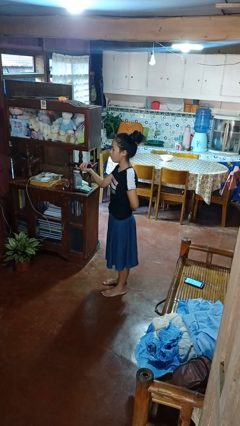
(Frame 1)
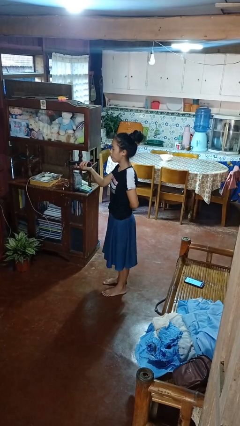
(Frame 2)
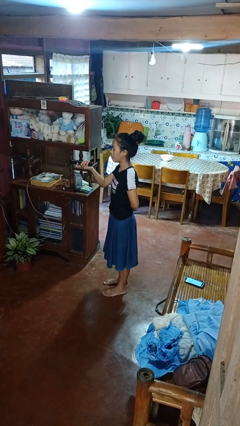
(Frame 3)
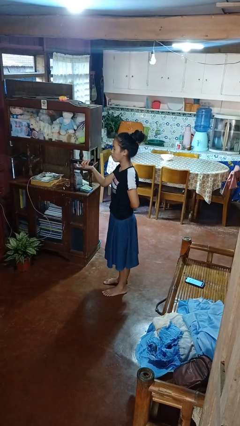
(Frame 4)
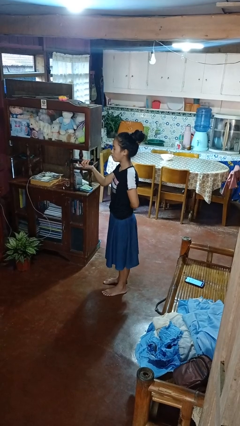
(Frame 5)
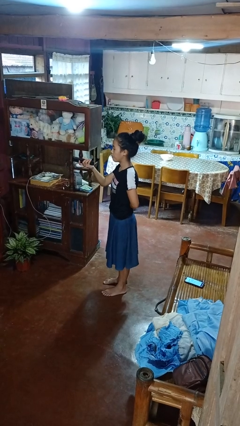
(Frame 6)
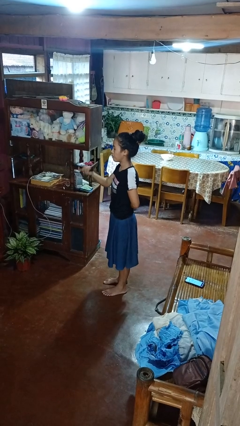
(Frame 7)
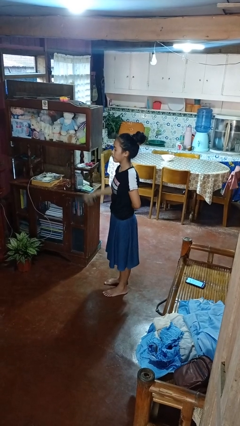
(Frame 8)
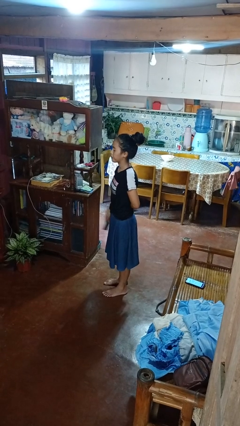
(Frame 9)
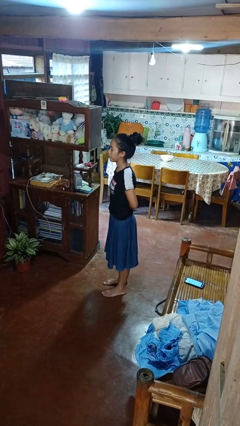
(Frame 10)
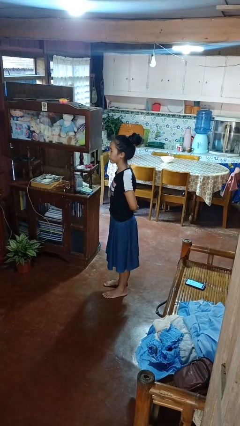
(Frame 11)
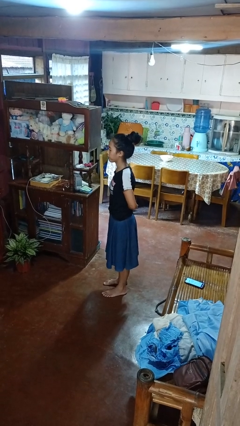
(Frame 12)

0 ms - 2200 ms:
person uses television remote

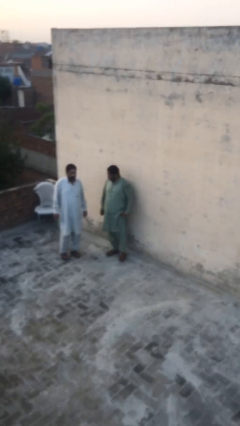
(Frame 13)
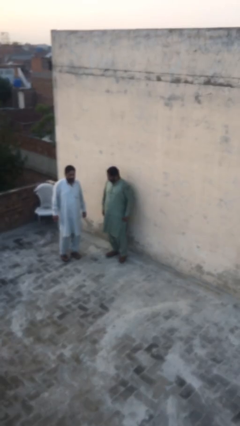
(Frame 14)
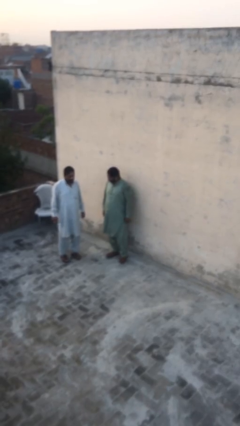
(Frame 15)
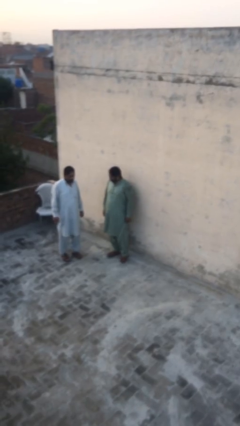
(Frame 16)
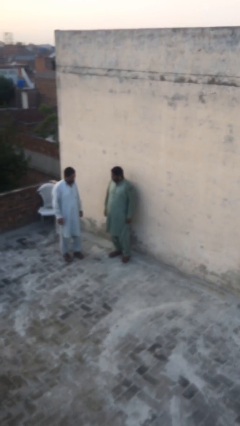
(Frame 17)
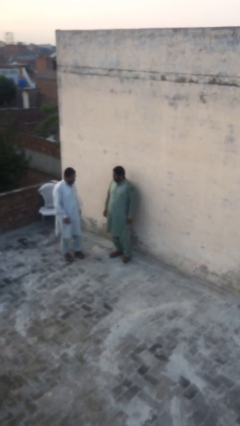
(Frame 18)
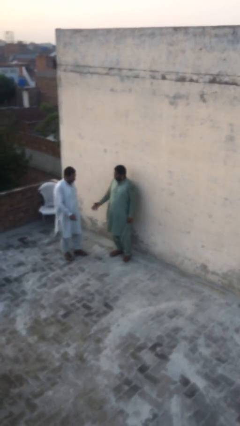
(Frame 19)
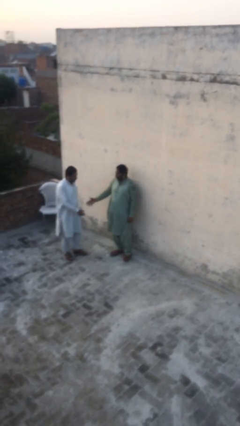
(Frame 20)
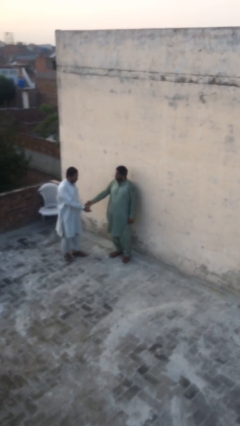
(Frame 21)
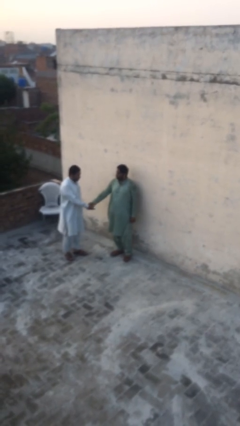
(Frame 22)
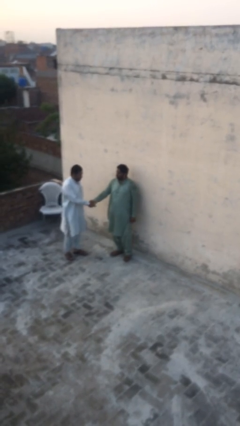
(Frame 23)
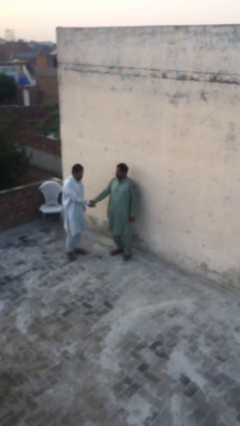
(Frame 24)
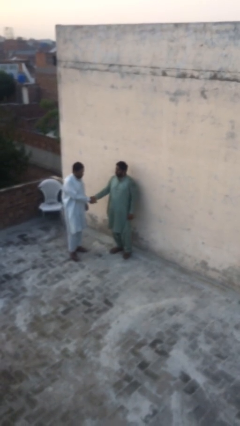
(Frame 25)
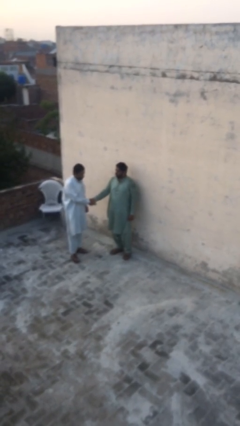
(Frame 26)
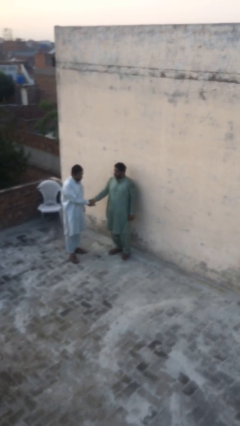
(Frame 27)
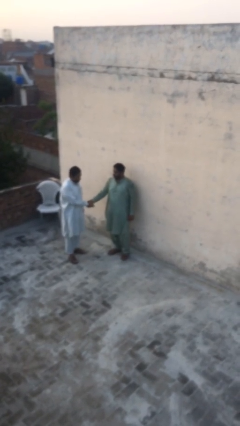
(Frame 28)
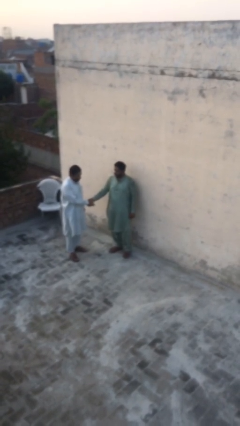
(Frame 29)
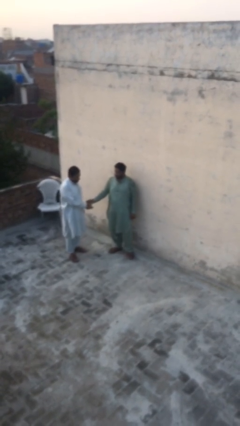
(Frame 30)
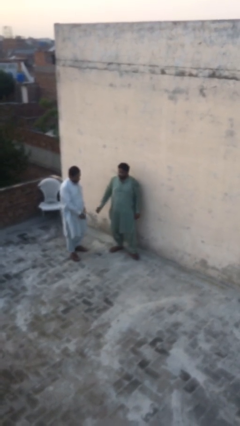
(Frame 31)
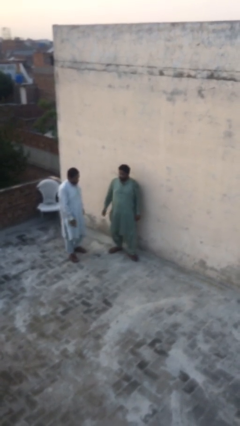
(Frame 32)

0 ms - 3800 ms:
person shakes hand

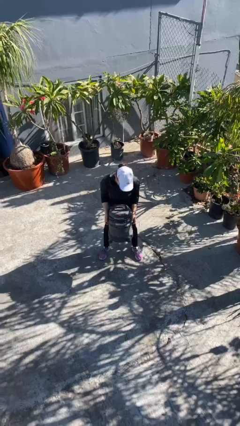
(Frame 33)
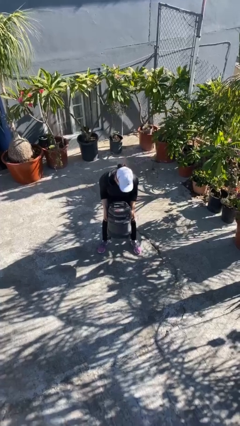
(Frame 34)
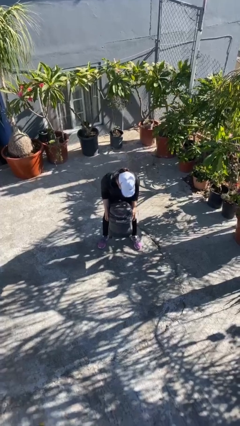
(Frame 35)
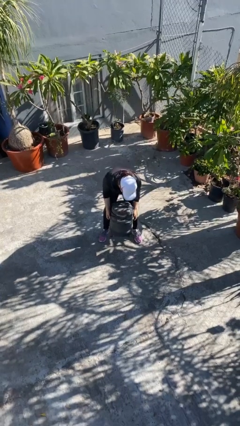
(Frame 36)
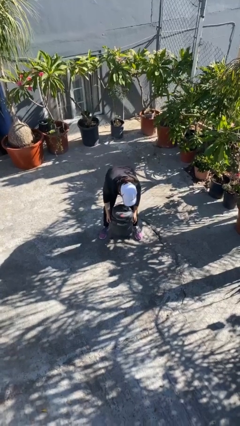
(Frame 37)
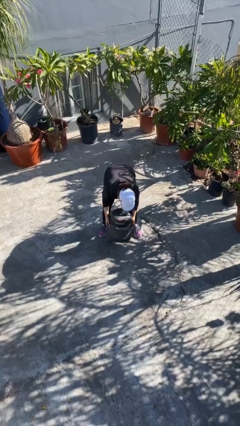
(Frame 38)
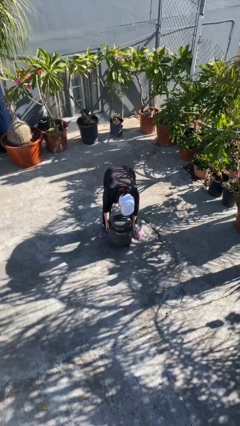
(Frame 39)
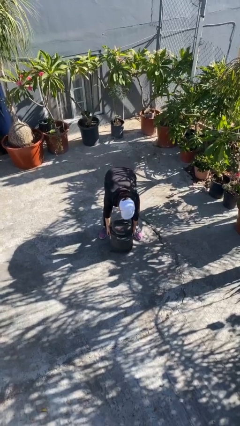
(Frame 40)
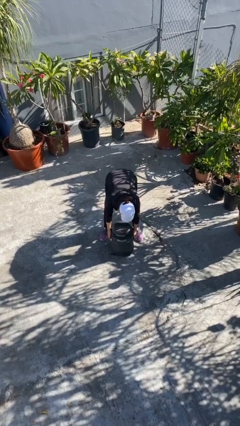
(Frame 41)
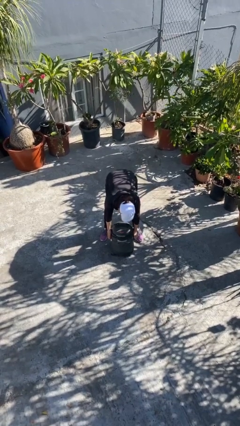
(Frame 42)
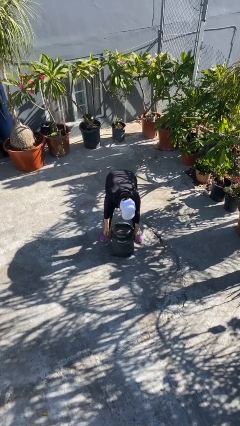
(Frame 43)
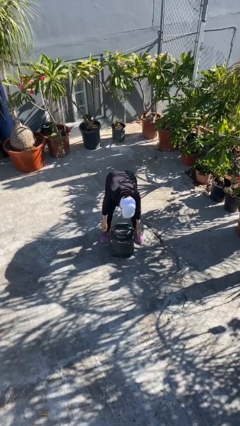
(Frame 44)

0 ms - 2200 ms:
person puts down object on floor

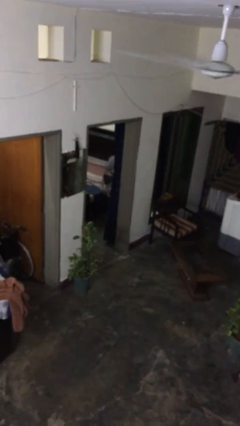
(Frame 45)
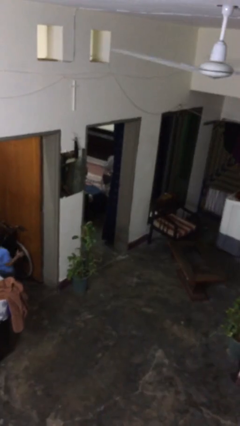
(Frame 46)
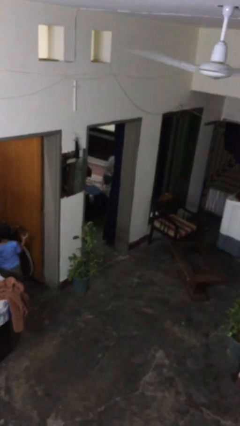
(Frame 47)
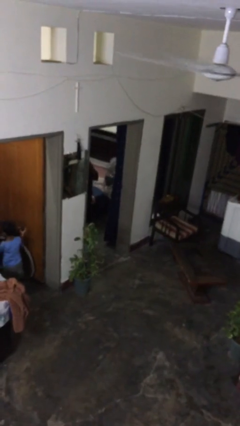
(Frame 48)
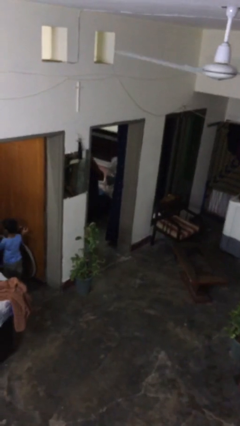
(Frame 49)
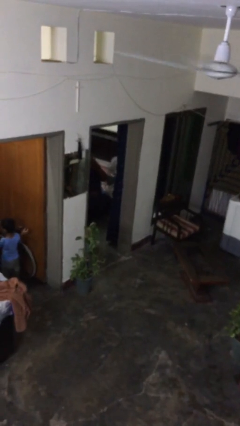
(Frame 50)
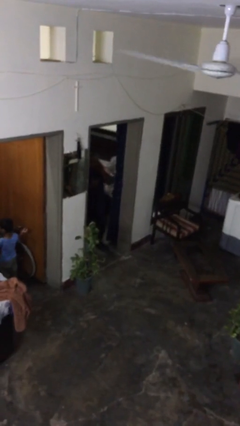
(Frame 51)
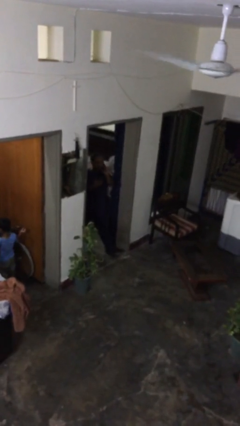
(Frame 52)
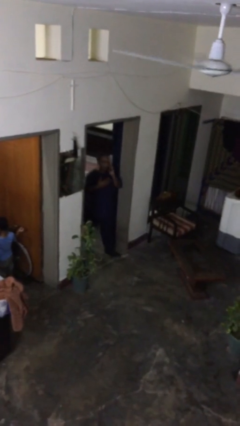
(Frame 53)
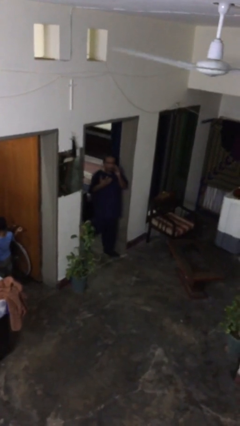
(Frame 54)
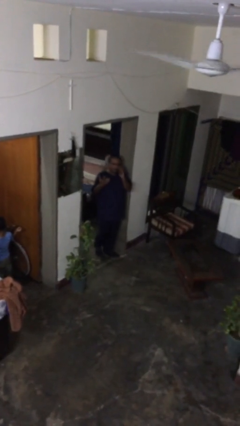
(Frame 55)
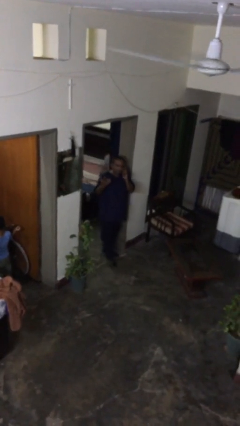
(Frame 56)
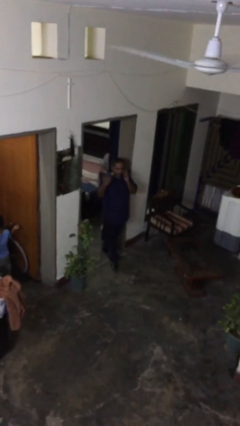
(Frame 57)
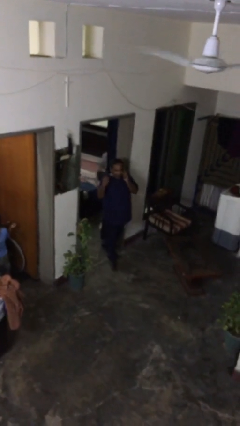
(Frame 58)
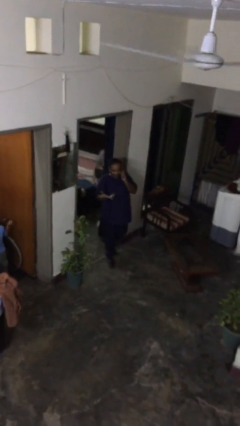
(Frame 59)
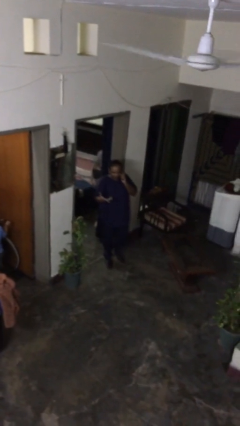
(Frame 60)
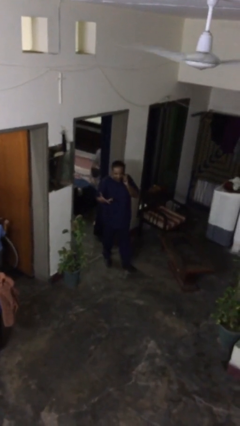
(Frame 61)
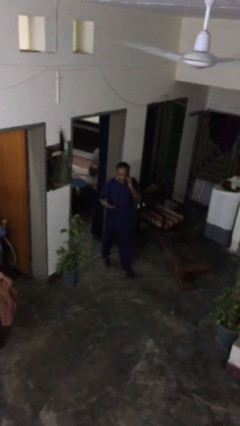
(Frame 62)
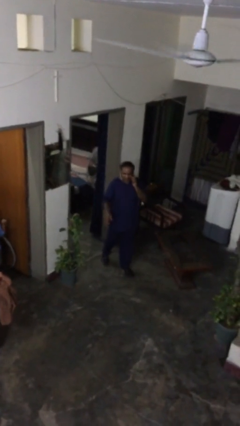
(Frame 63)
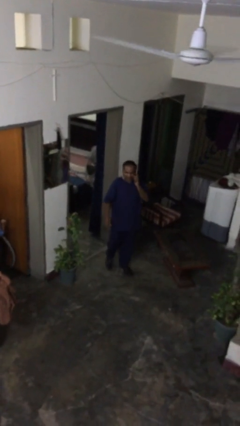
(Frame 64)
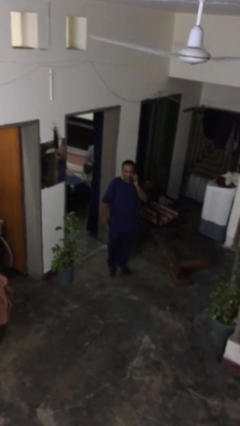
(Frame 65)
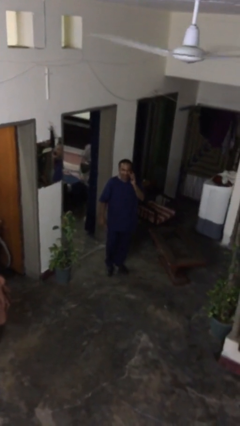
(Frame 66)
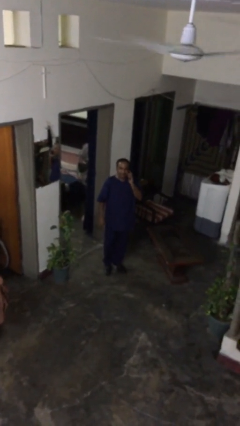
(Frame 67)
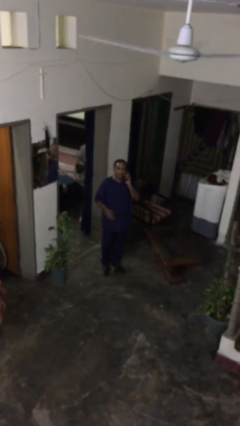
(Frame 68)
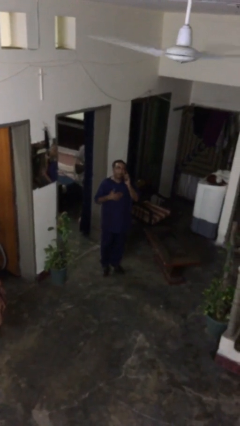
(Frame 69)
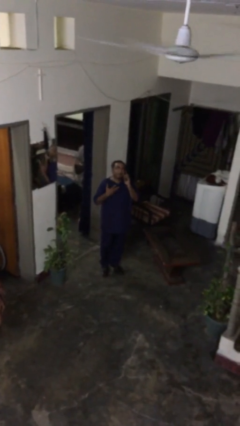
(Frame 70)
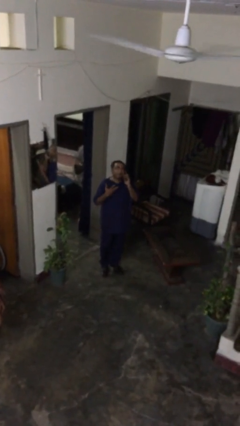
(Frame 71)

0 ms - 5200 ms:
person enters scene through structure

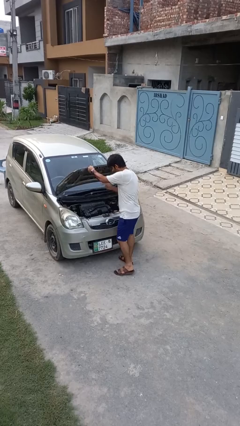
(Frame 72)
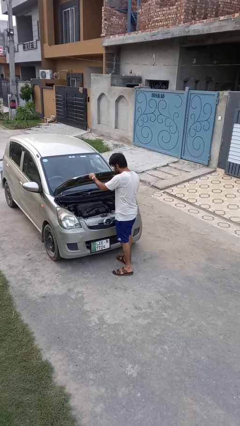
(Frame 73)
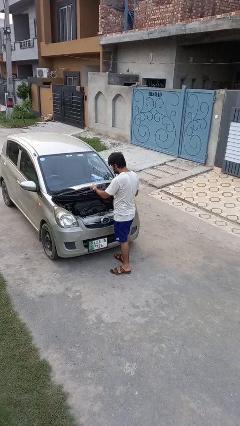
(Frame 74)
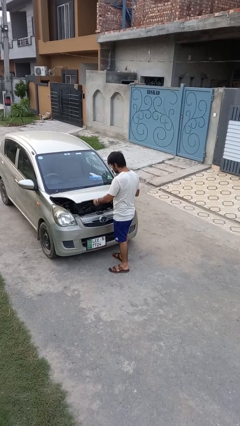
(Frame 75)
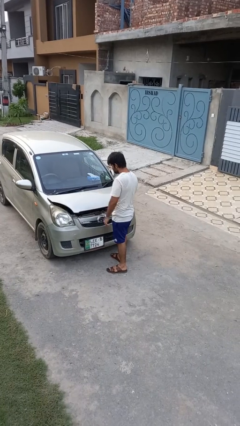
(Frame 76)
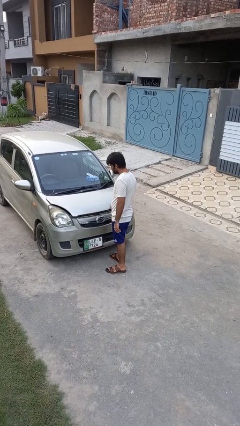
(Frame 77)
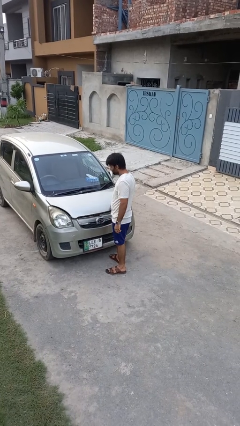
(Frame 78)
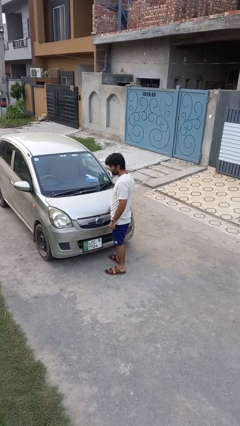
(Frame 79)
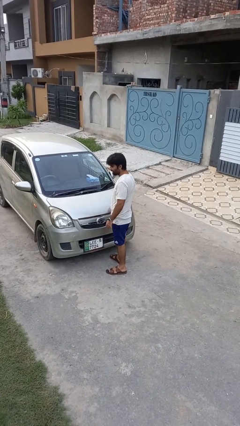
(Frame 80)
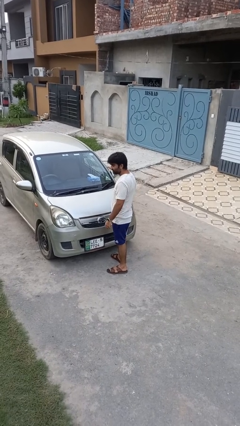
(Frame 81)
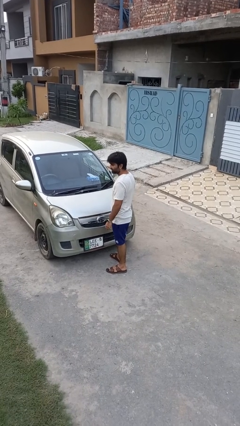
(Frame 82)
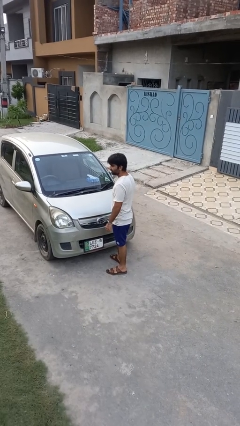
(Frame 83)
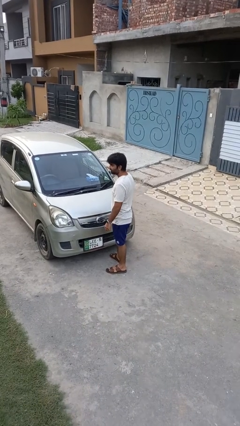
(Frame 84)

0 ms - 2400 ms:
person closes car hood

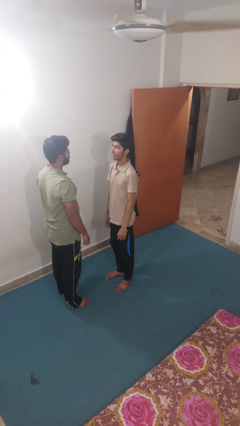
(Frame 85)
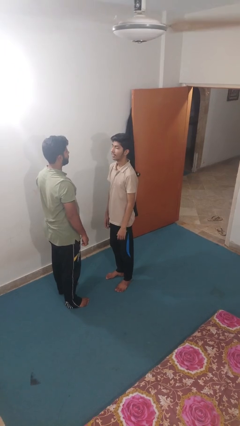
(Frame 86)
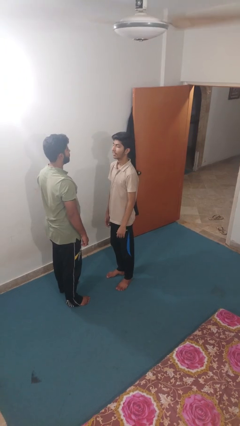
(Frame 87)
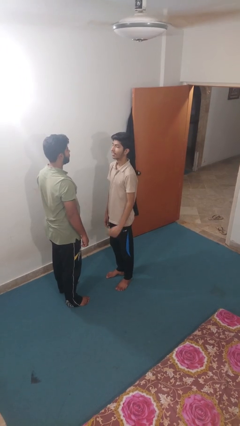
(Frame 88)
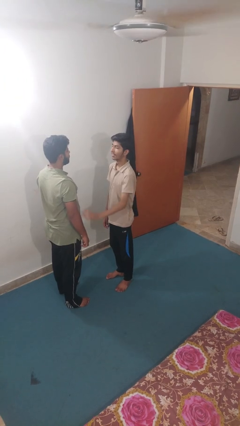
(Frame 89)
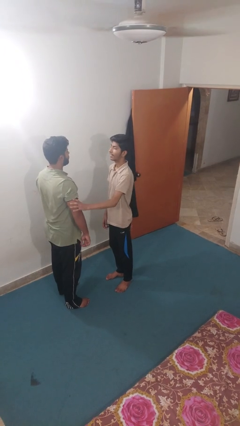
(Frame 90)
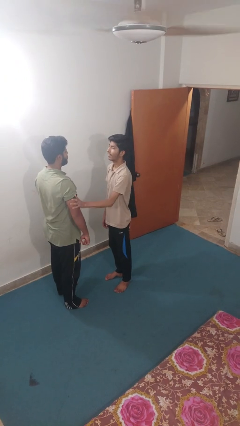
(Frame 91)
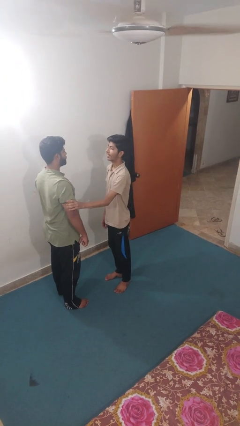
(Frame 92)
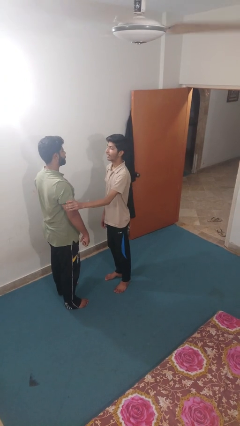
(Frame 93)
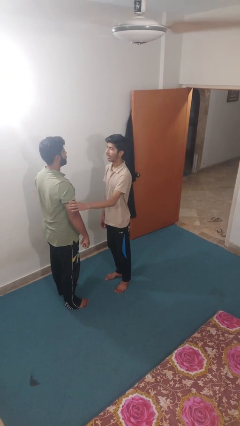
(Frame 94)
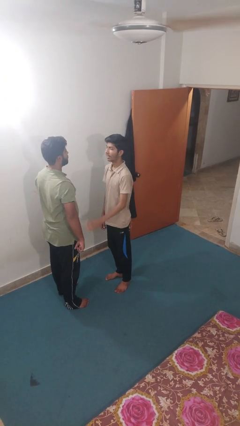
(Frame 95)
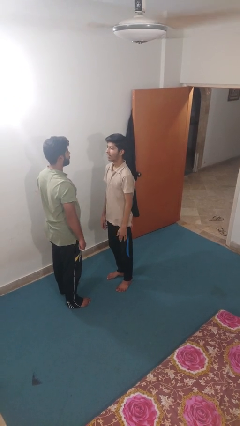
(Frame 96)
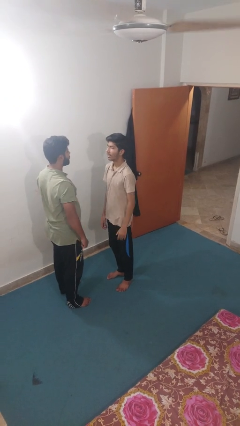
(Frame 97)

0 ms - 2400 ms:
person grabs person by bicep
